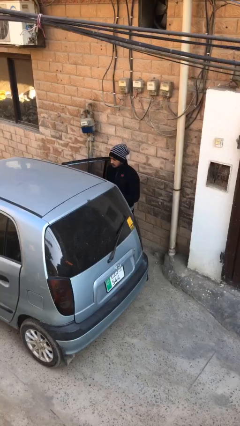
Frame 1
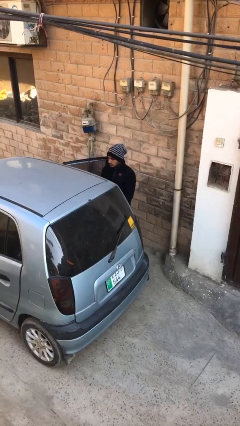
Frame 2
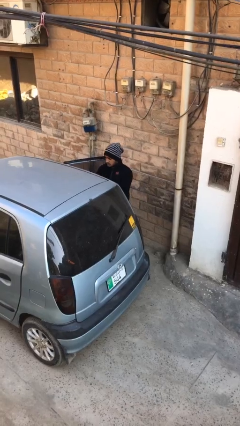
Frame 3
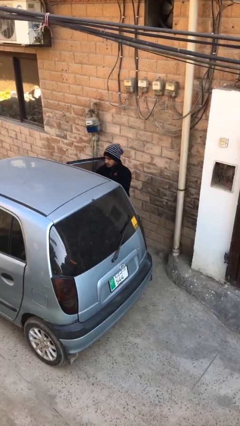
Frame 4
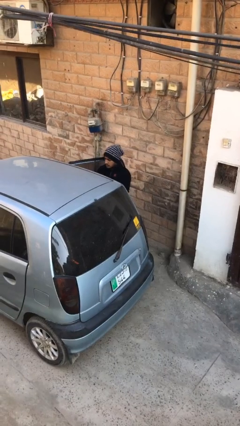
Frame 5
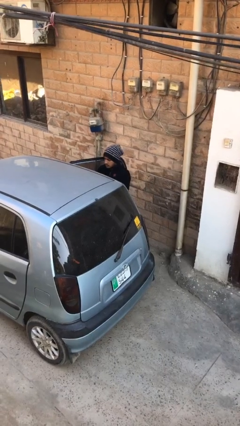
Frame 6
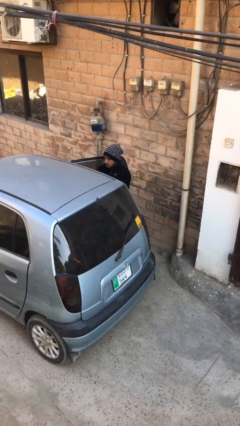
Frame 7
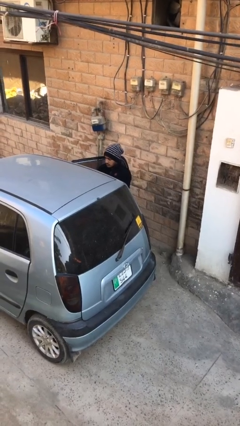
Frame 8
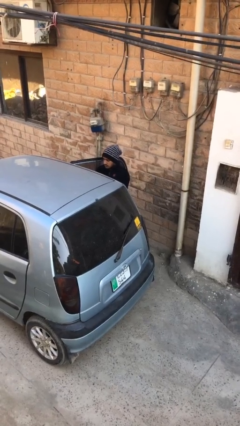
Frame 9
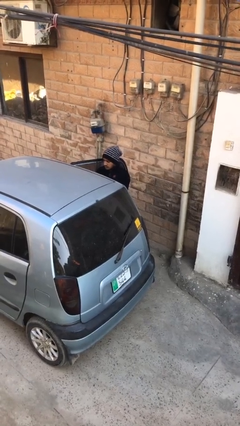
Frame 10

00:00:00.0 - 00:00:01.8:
person loads car

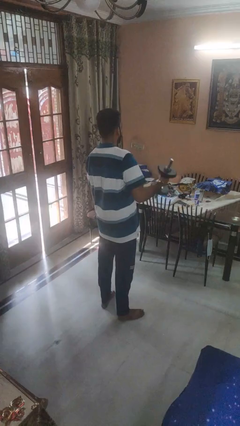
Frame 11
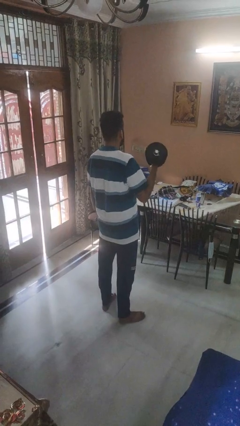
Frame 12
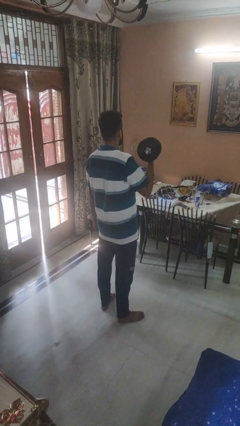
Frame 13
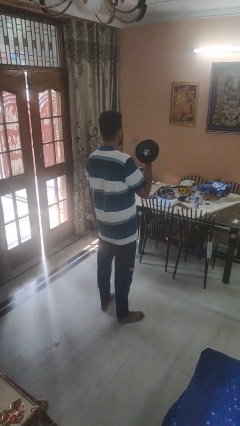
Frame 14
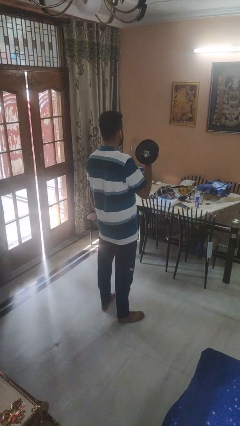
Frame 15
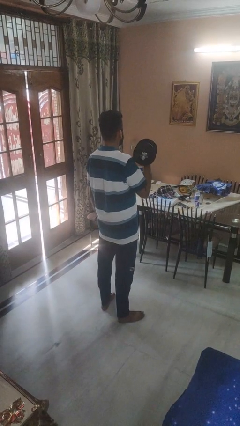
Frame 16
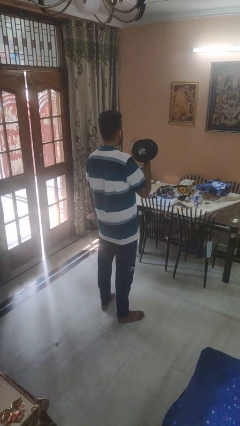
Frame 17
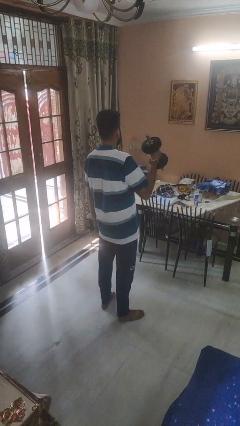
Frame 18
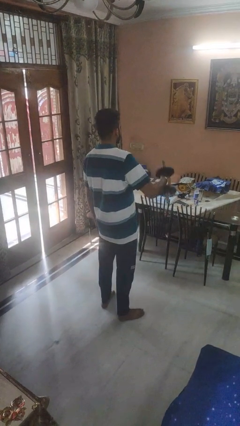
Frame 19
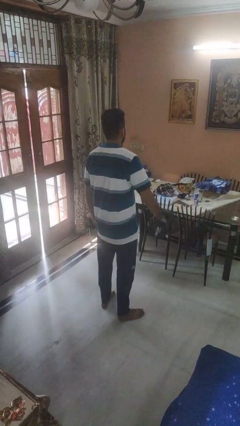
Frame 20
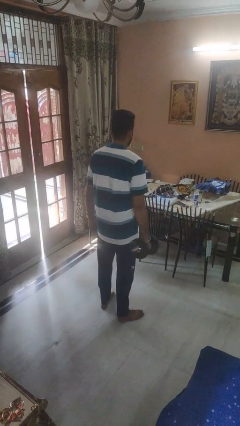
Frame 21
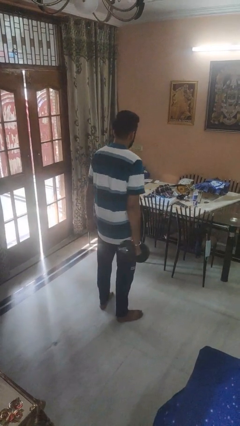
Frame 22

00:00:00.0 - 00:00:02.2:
person lifts dumbbells

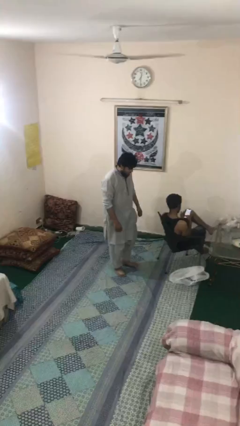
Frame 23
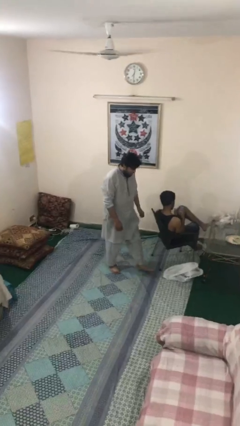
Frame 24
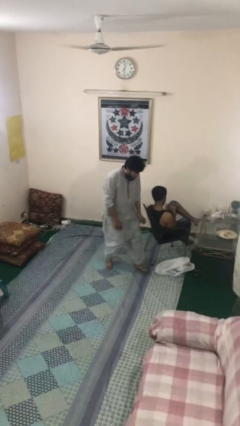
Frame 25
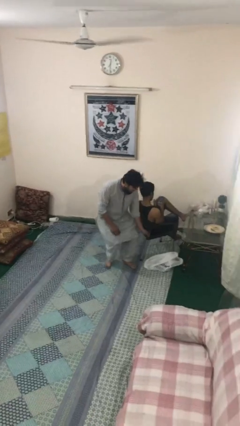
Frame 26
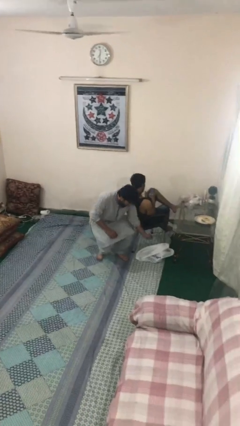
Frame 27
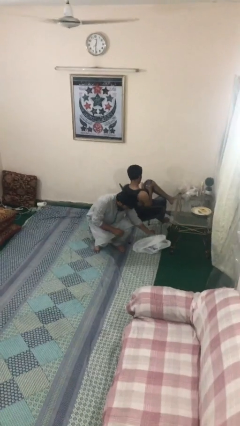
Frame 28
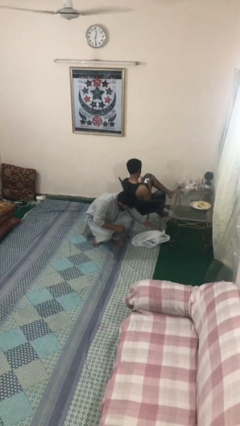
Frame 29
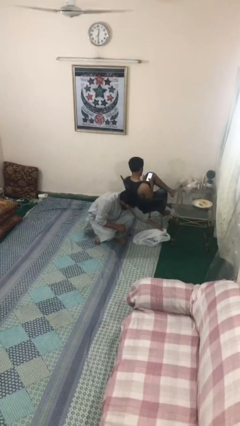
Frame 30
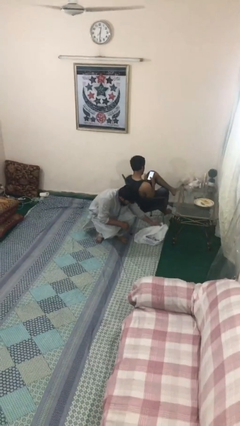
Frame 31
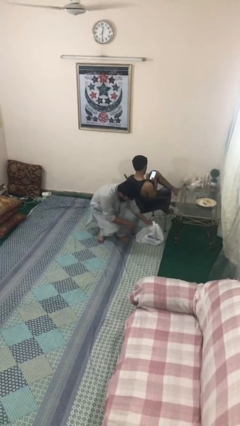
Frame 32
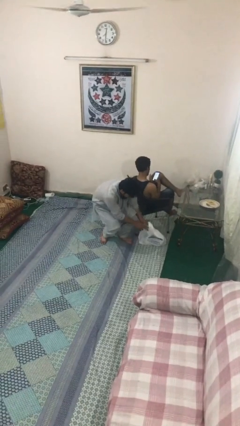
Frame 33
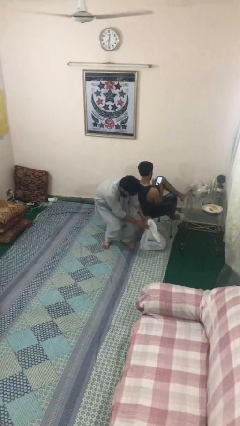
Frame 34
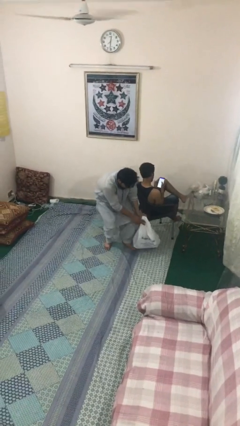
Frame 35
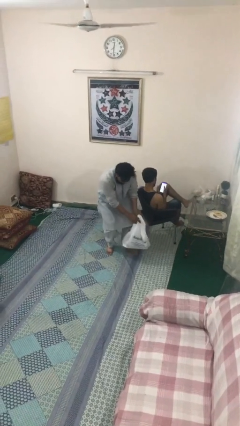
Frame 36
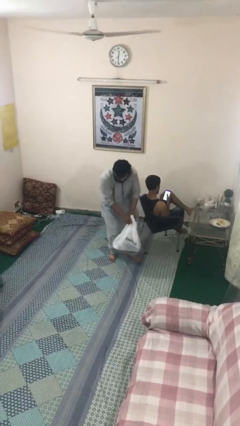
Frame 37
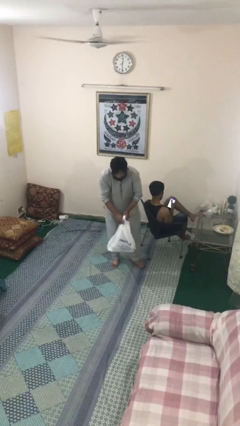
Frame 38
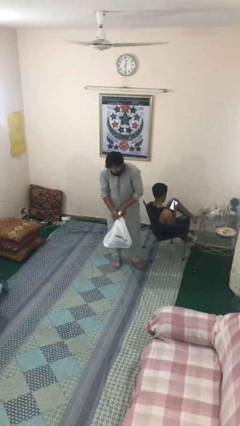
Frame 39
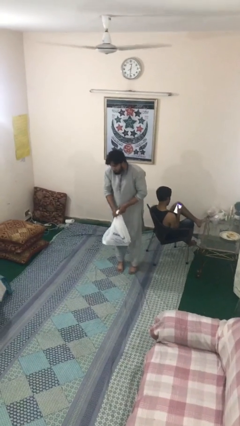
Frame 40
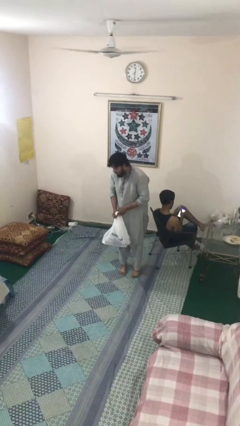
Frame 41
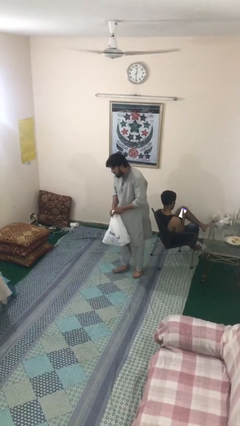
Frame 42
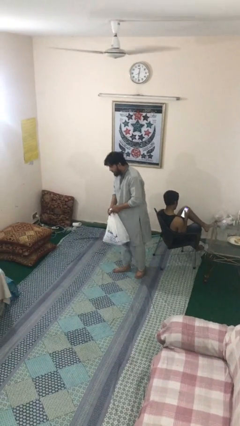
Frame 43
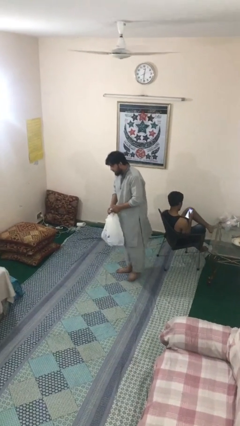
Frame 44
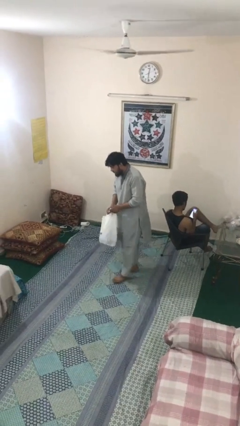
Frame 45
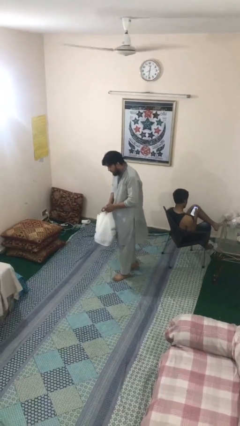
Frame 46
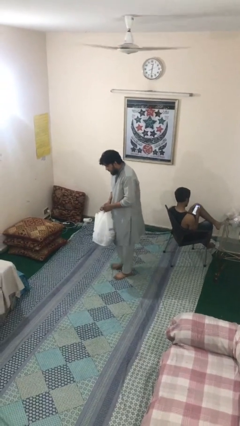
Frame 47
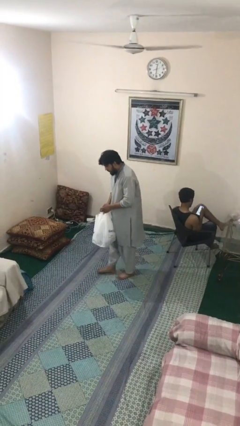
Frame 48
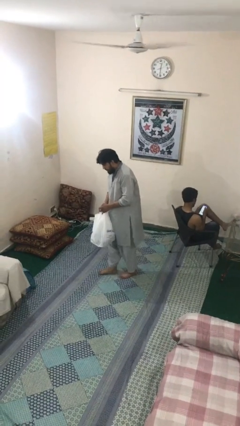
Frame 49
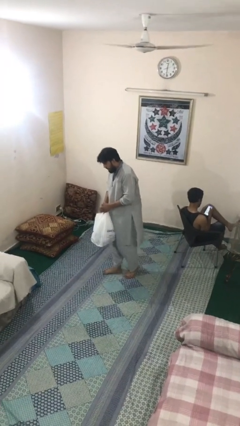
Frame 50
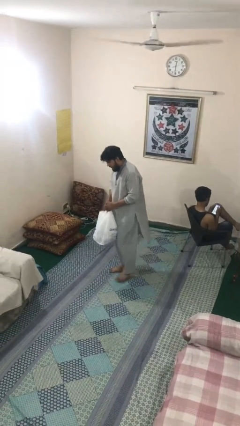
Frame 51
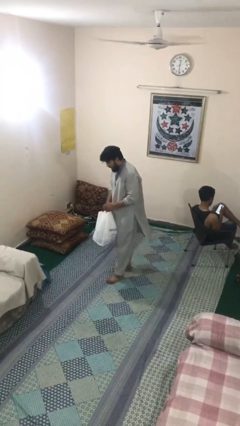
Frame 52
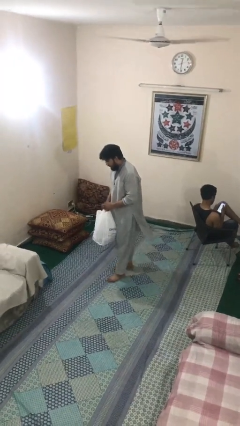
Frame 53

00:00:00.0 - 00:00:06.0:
person steals object from person

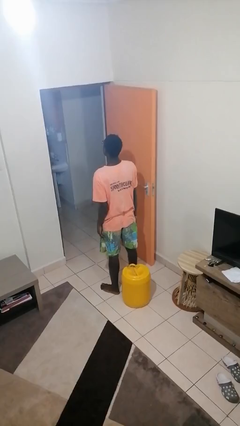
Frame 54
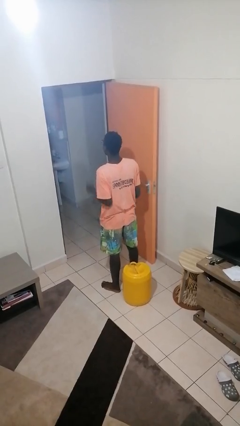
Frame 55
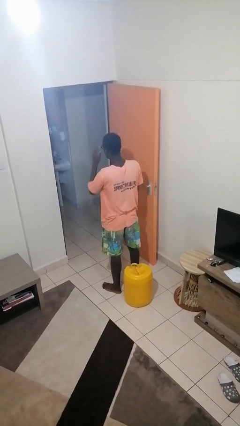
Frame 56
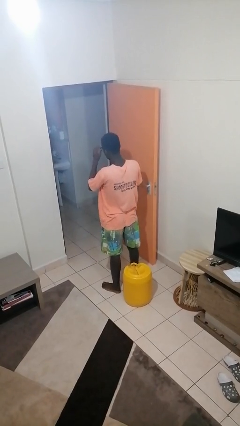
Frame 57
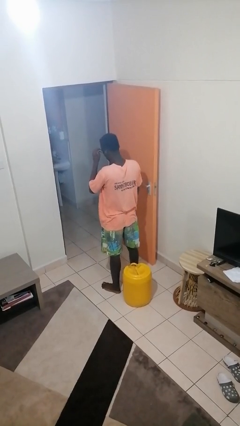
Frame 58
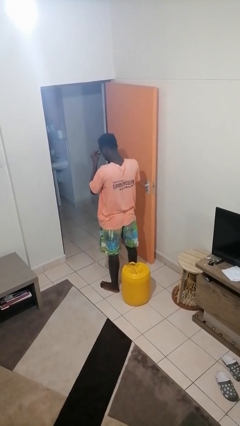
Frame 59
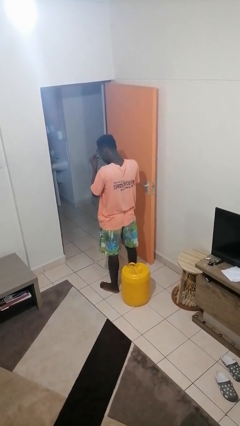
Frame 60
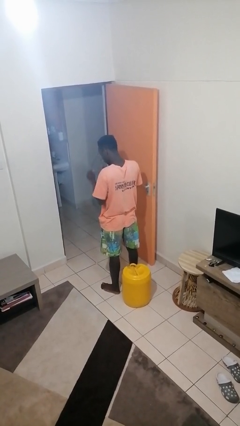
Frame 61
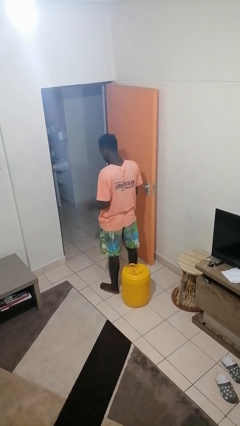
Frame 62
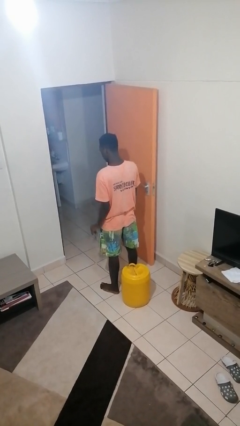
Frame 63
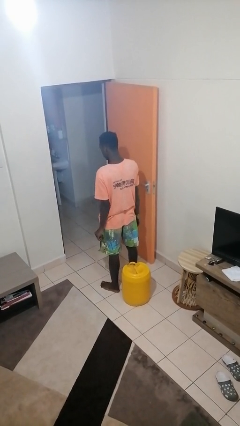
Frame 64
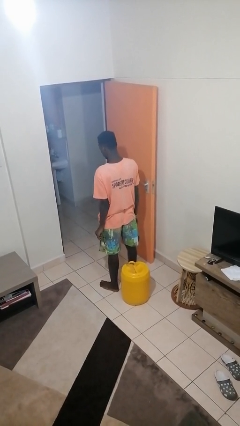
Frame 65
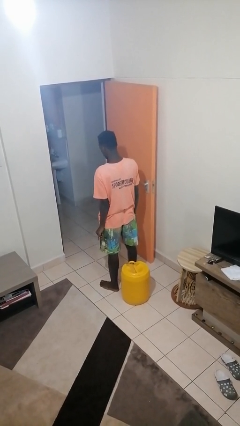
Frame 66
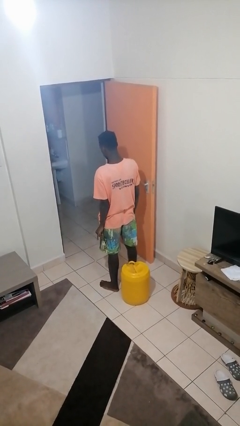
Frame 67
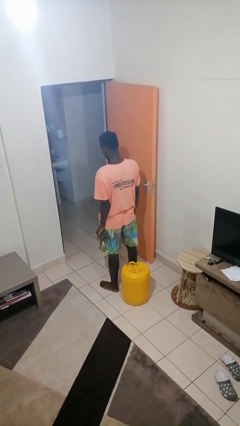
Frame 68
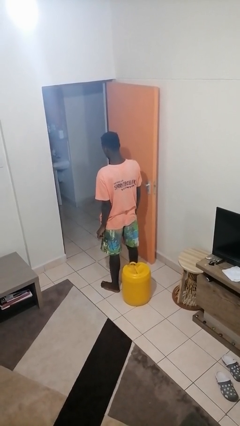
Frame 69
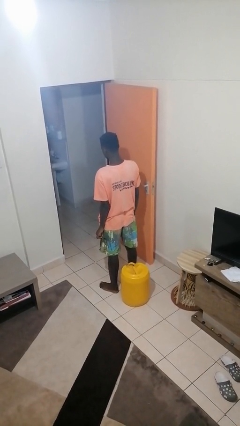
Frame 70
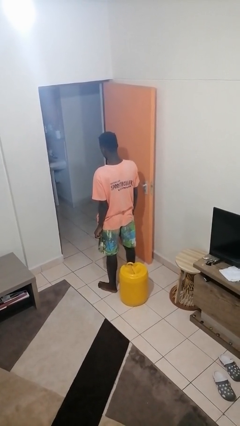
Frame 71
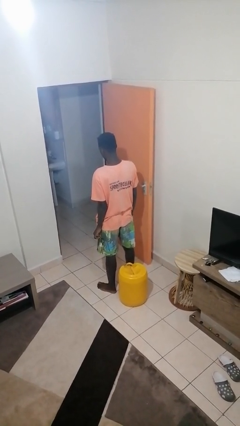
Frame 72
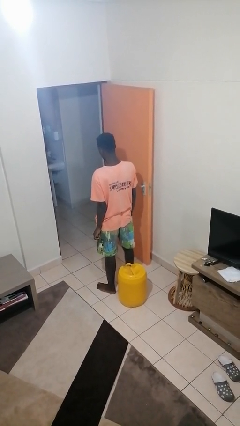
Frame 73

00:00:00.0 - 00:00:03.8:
person takes off glasses

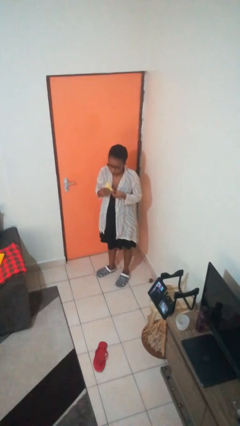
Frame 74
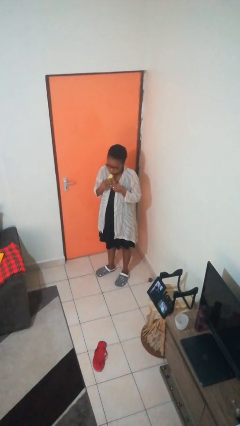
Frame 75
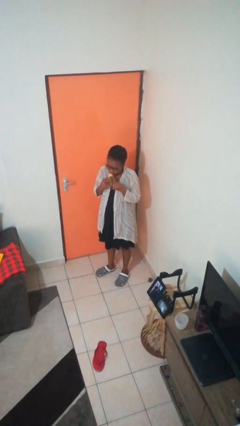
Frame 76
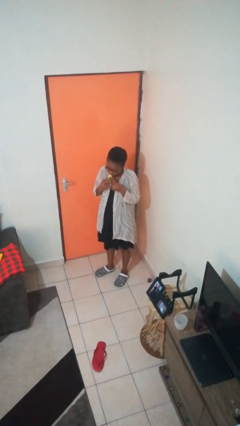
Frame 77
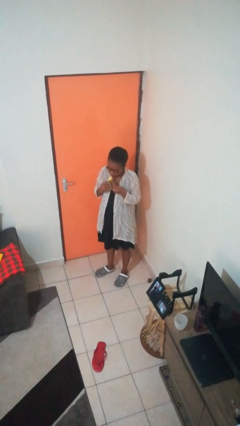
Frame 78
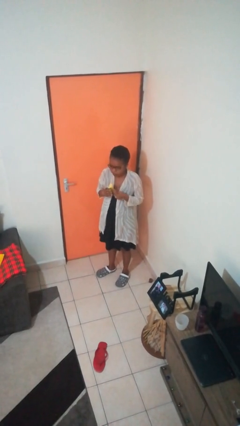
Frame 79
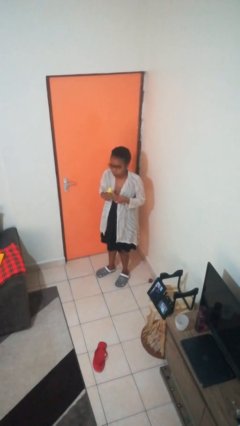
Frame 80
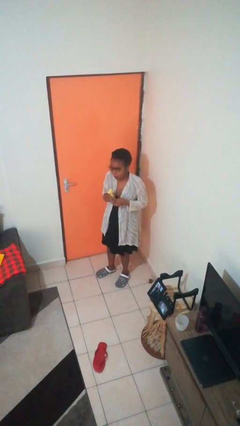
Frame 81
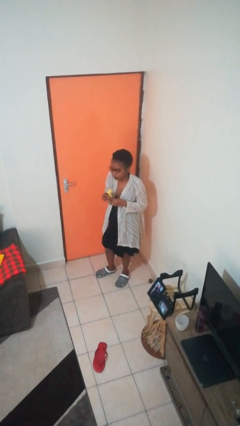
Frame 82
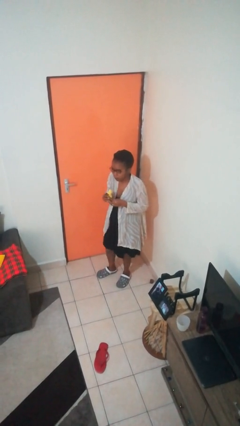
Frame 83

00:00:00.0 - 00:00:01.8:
person eats banana

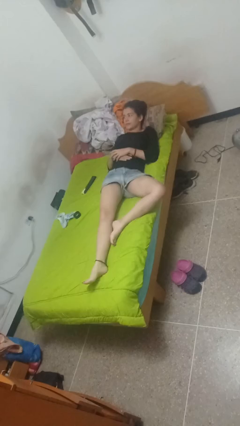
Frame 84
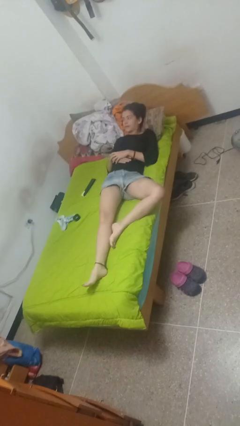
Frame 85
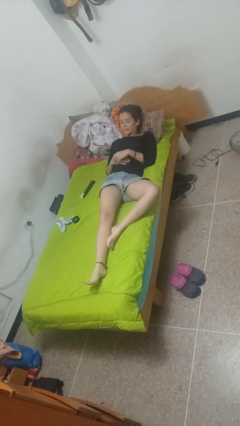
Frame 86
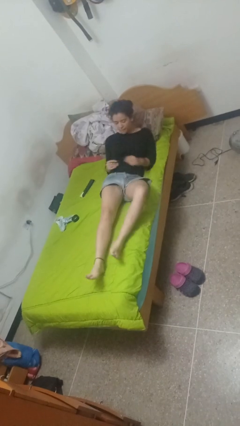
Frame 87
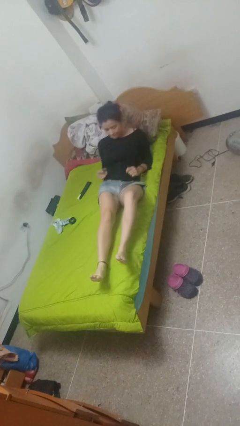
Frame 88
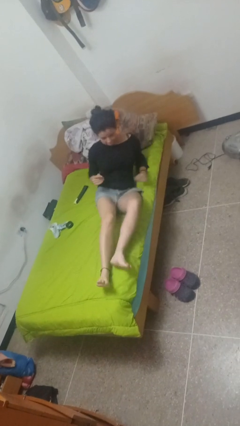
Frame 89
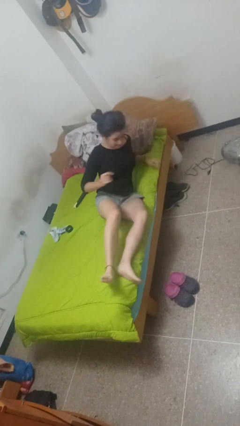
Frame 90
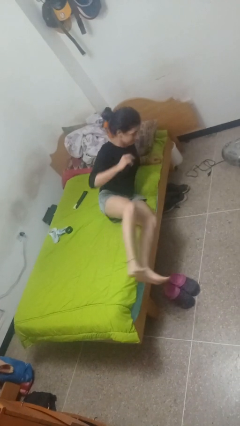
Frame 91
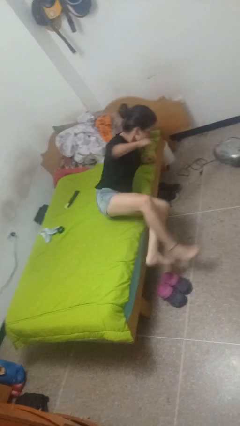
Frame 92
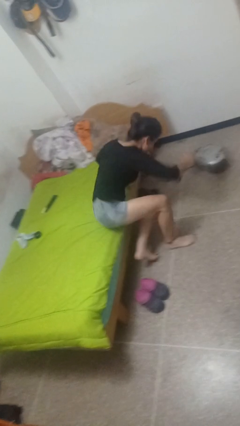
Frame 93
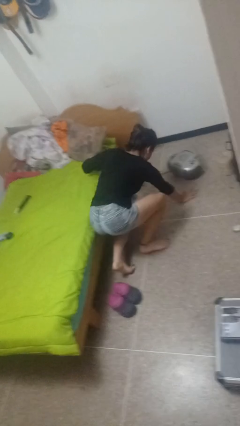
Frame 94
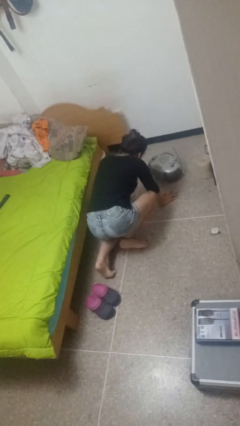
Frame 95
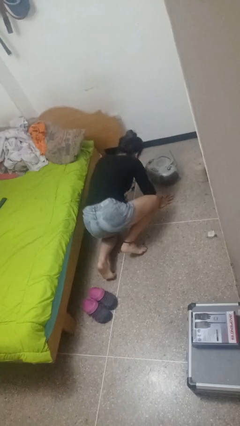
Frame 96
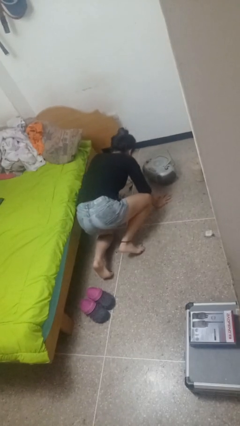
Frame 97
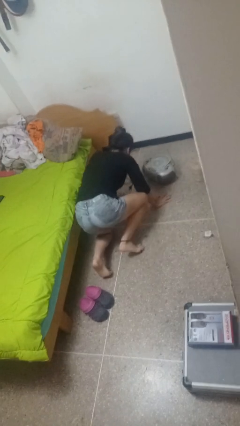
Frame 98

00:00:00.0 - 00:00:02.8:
person falls from bed
